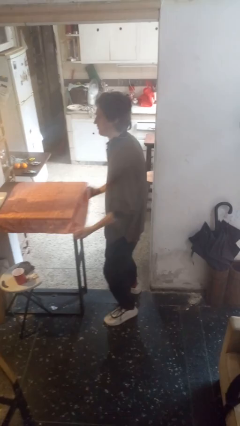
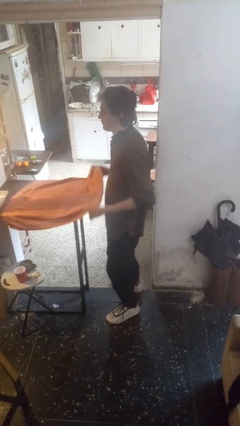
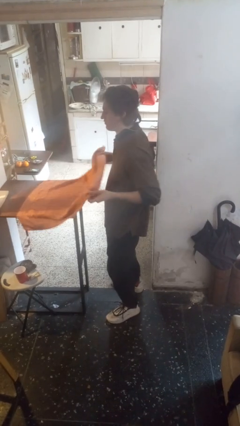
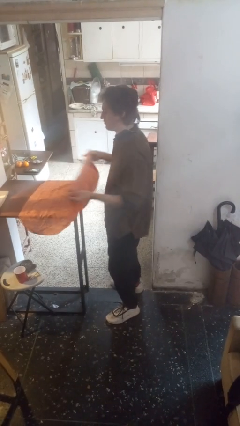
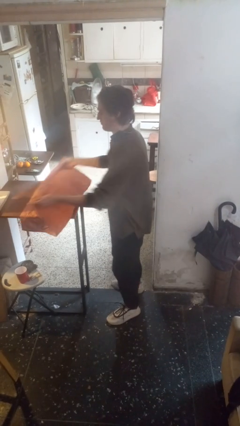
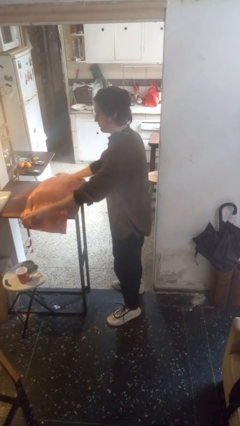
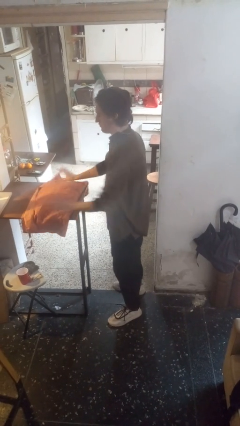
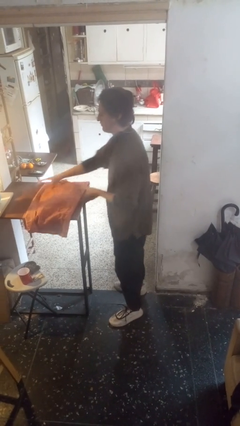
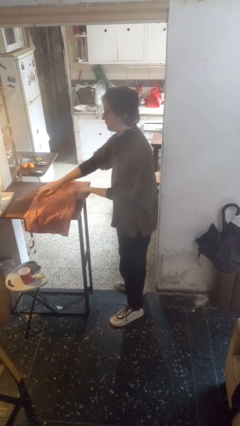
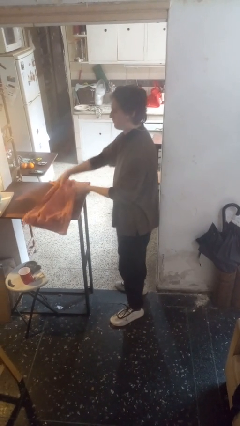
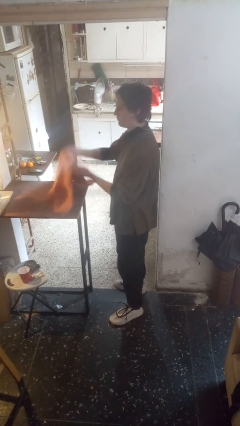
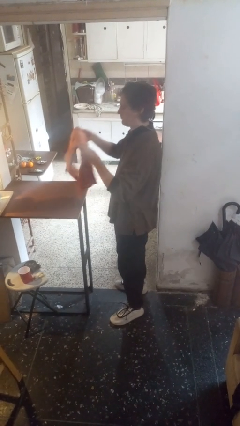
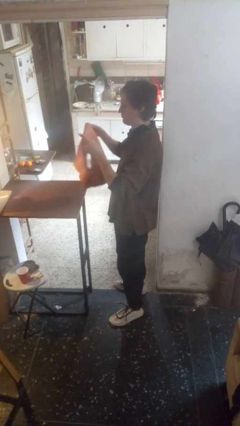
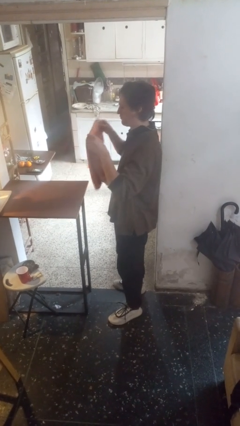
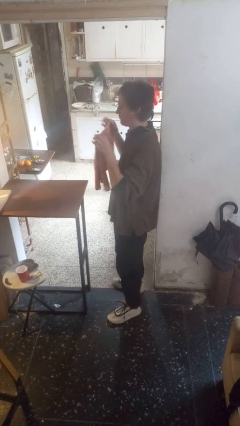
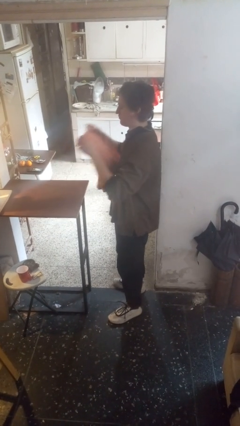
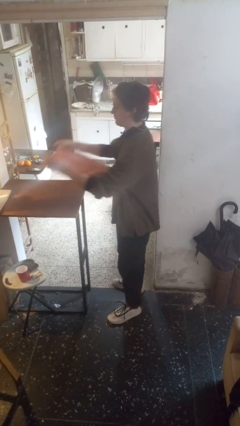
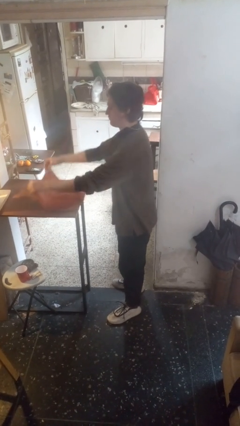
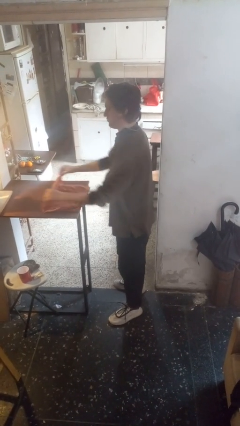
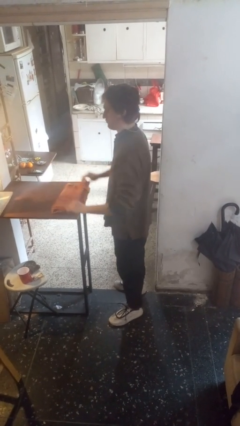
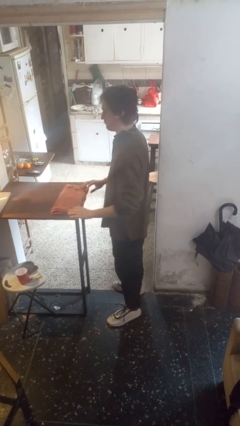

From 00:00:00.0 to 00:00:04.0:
person folds tablecloth

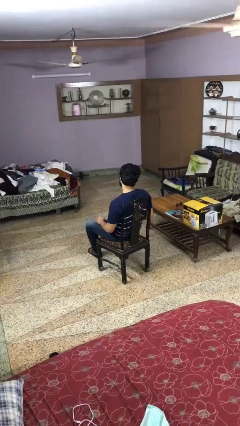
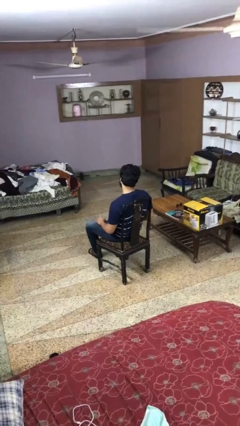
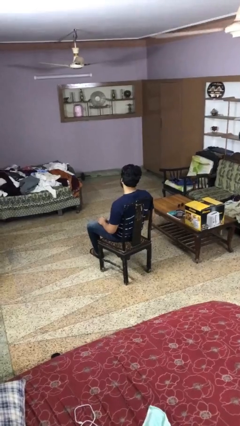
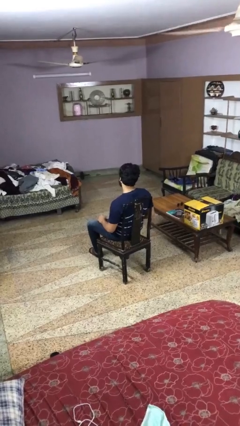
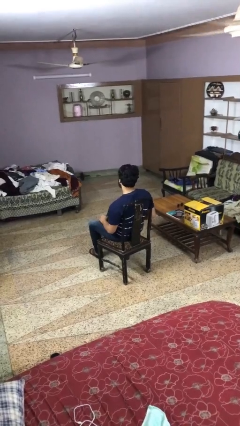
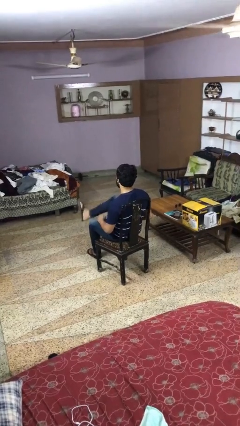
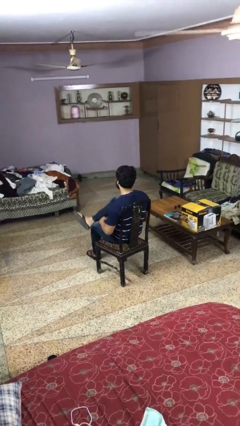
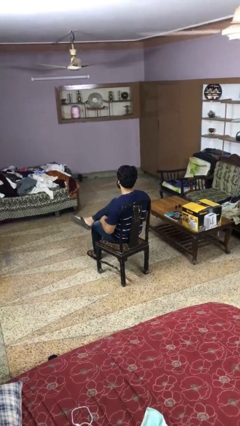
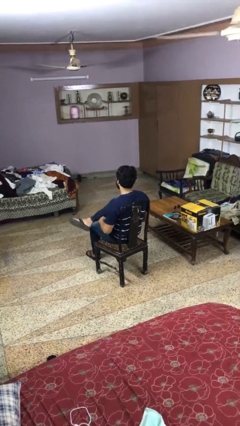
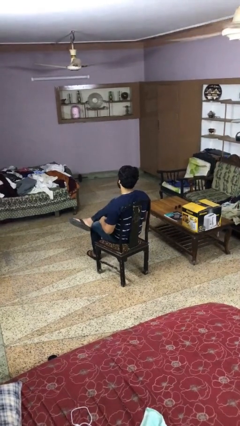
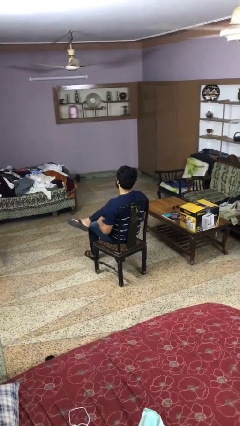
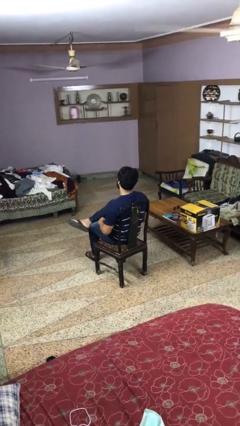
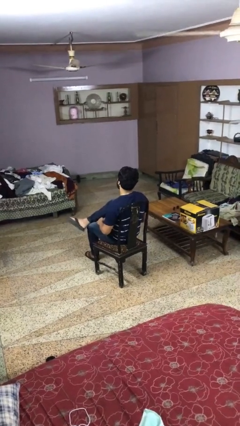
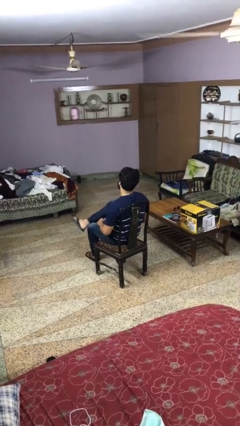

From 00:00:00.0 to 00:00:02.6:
person crosses legs

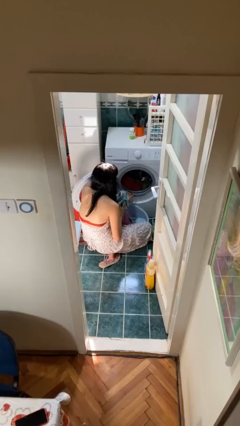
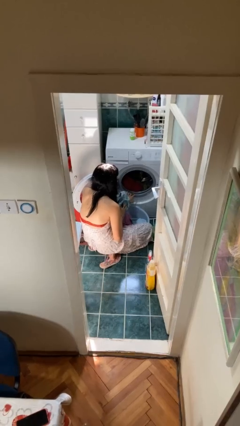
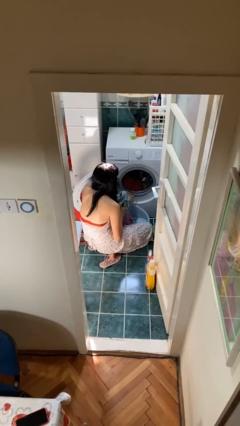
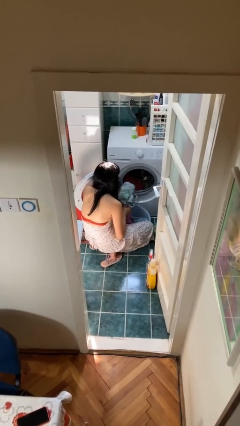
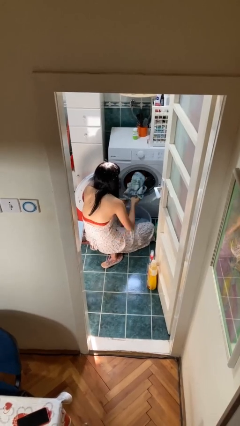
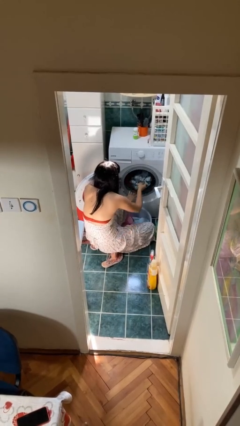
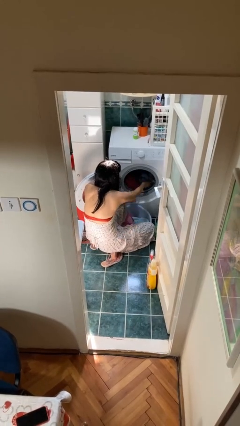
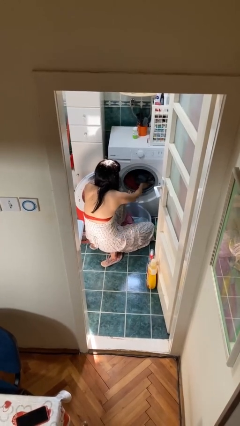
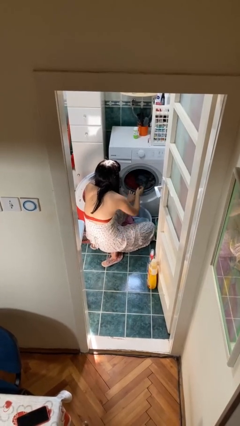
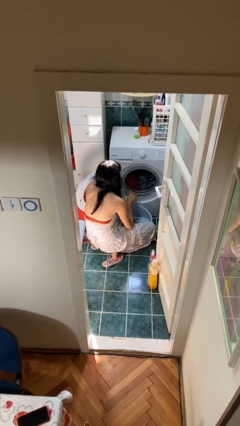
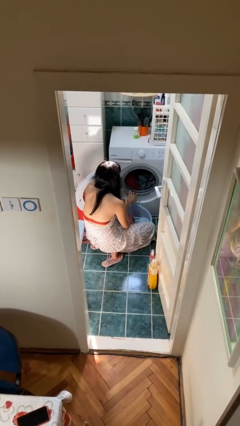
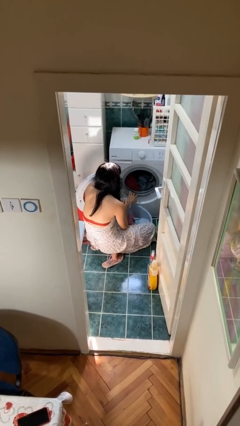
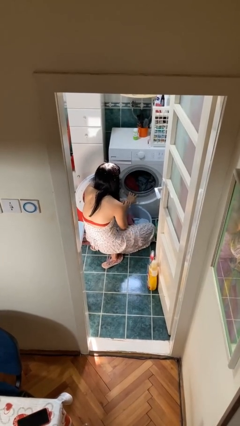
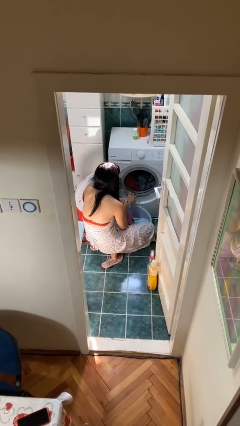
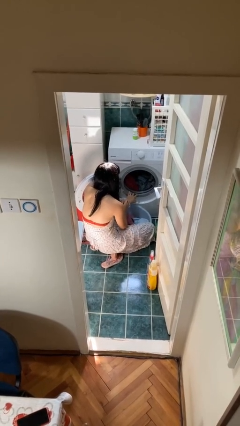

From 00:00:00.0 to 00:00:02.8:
person loads clotheswasher

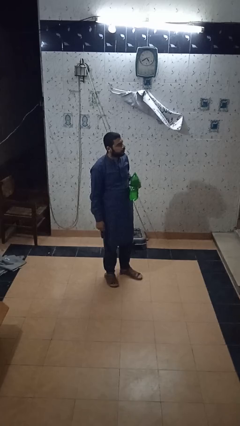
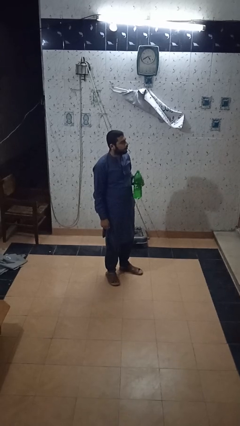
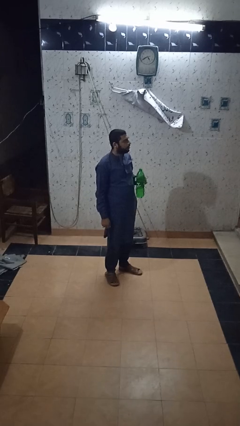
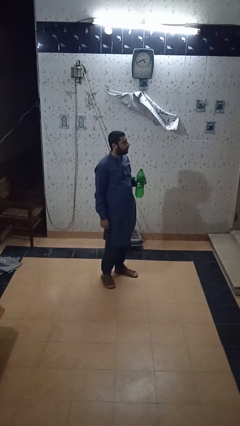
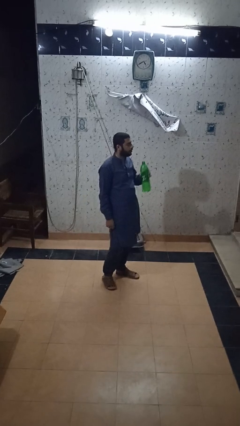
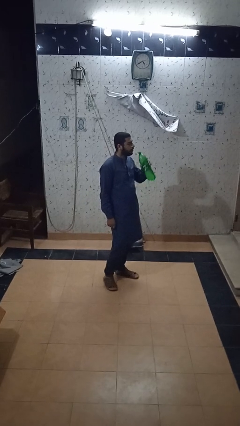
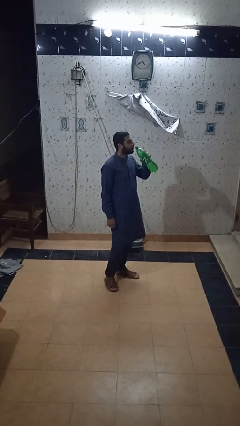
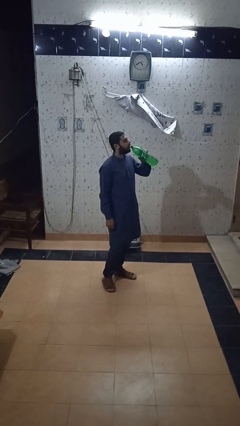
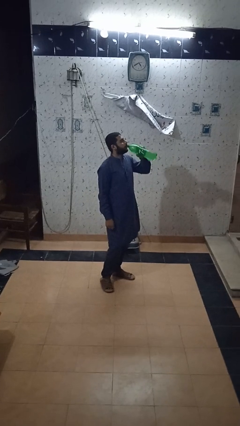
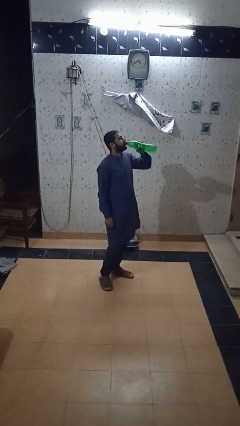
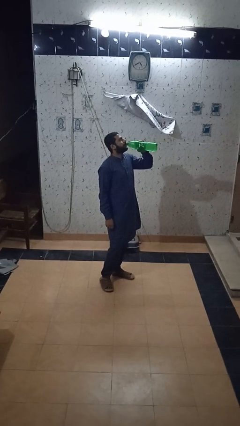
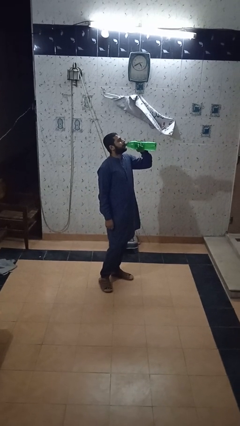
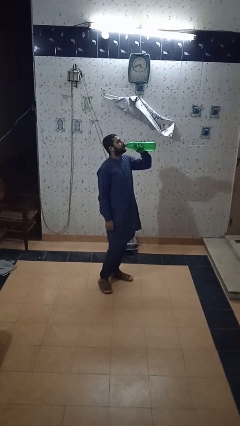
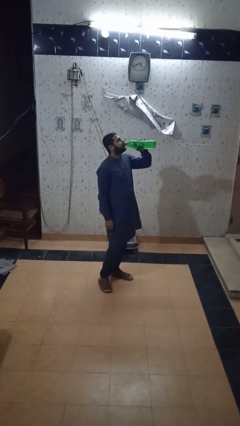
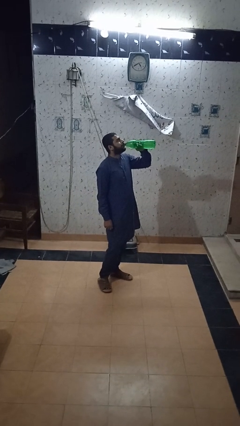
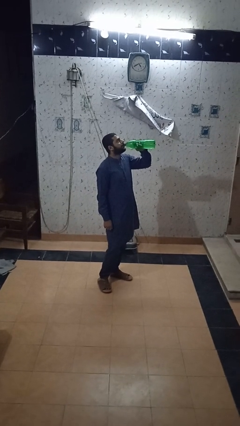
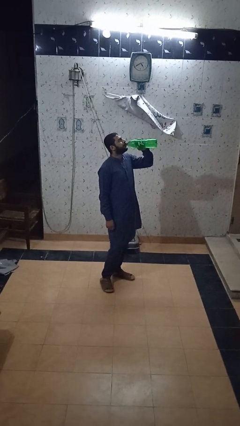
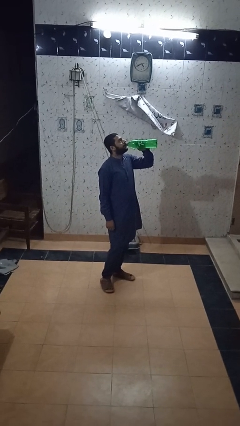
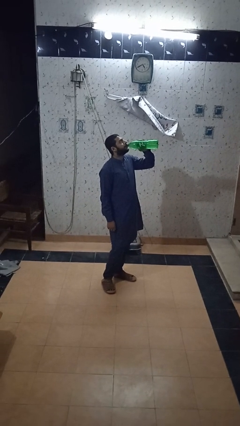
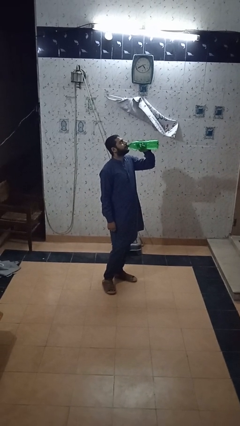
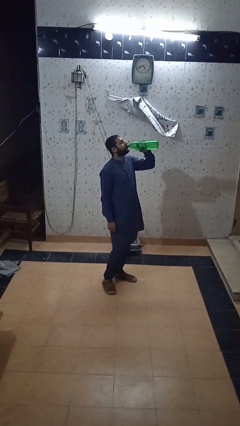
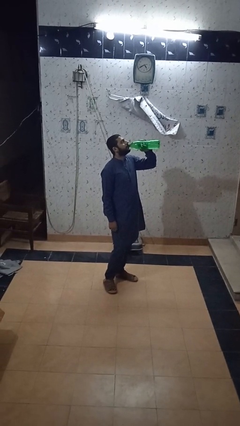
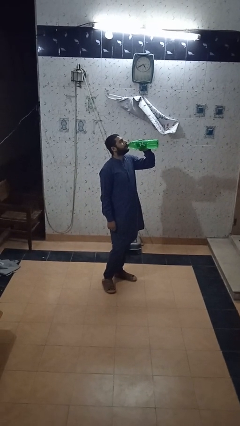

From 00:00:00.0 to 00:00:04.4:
person drinks from bottle

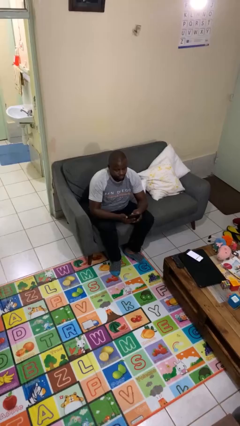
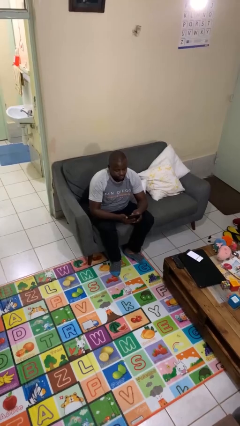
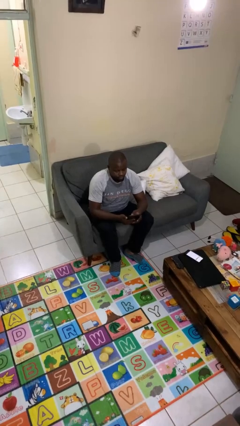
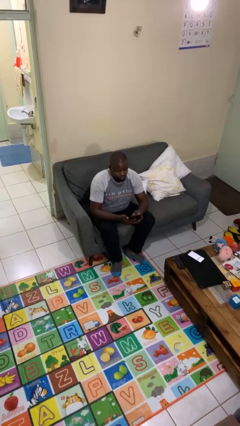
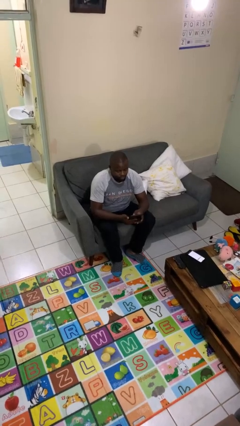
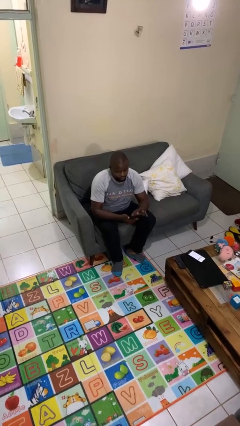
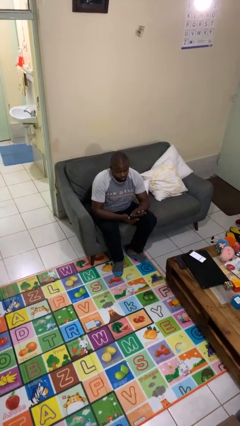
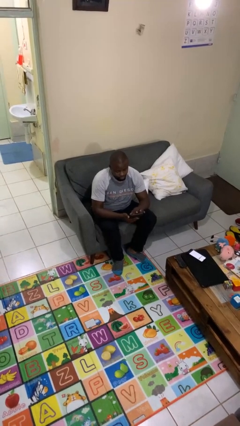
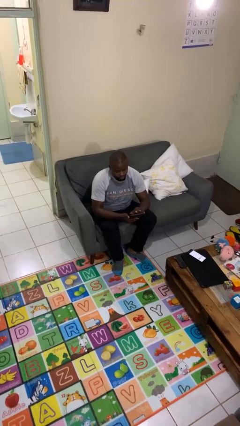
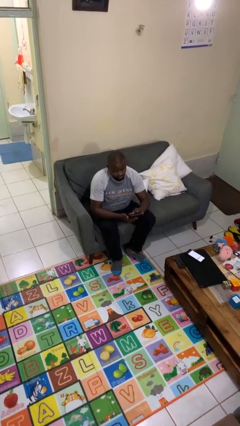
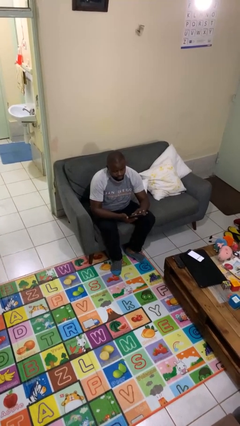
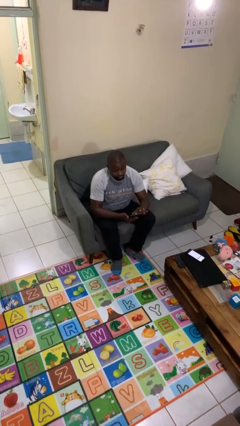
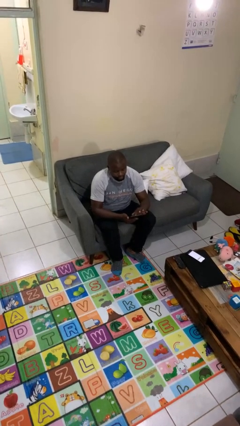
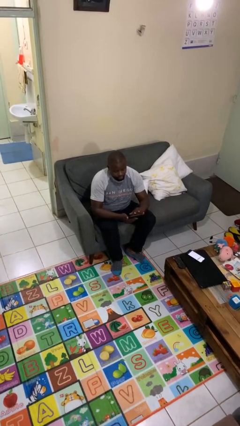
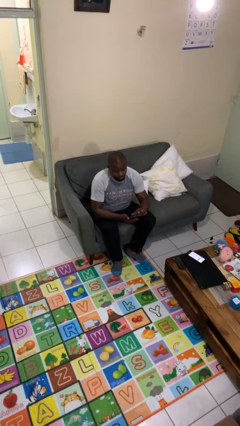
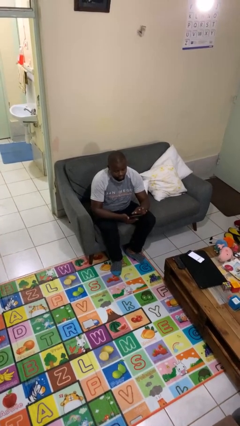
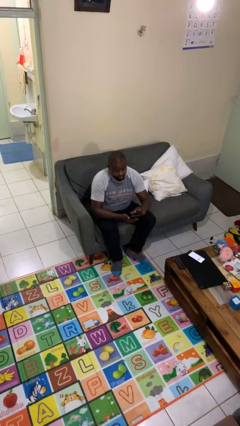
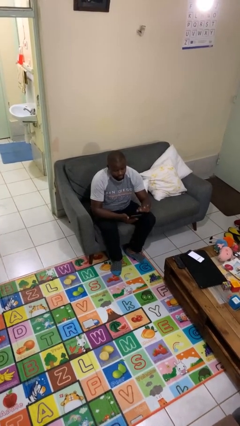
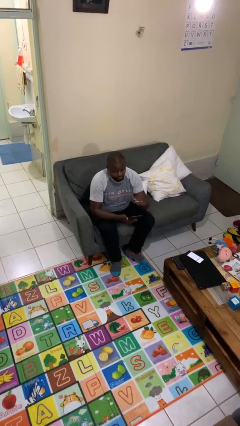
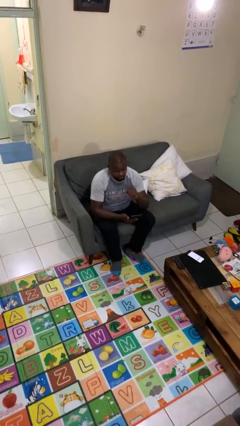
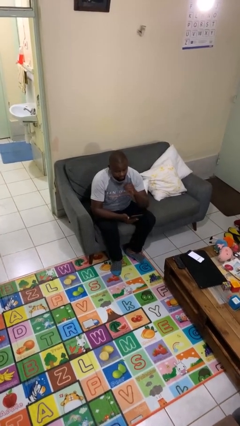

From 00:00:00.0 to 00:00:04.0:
person interacts with tablet

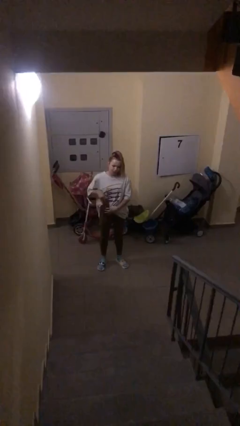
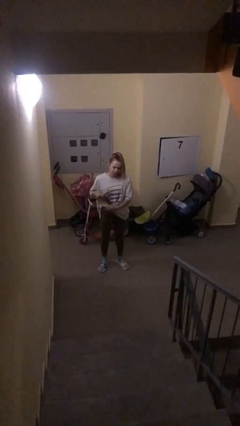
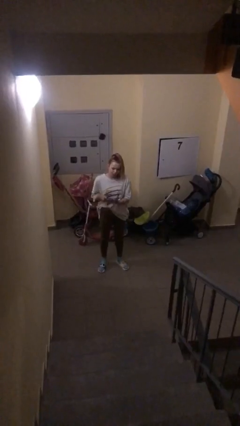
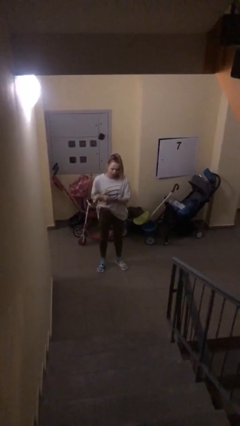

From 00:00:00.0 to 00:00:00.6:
person takes phone from pocket
